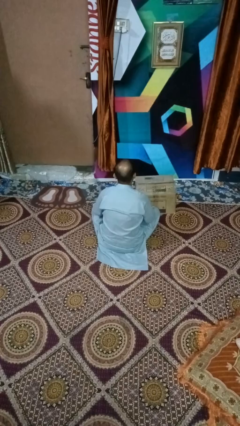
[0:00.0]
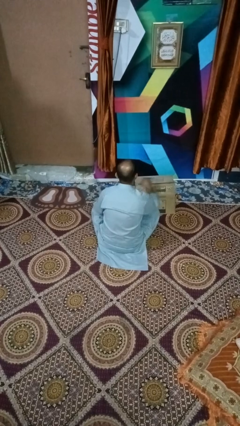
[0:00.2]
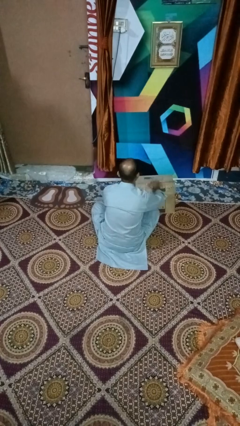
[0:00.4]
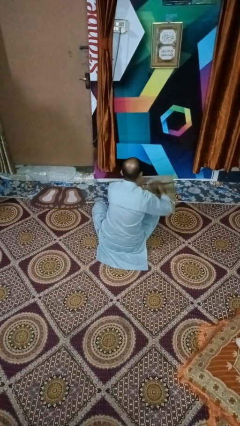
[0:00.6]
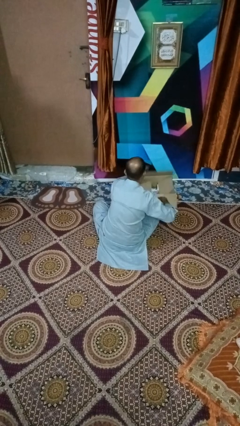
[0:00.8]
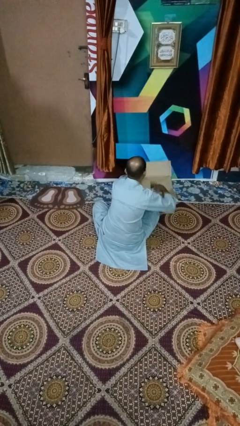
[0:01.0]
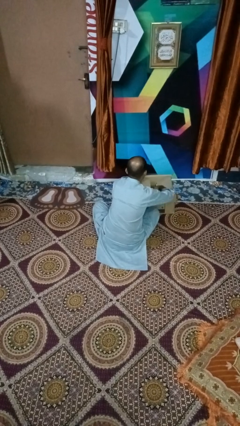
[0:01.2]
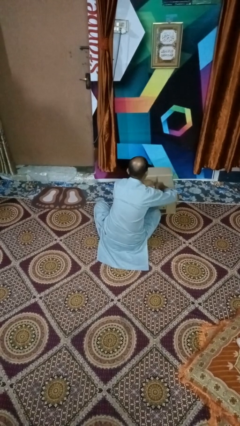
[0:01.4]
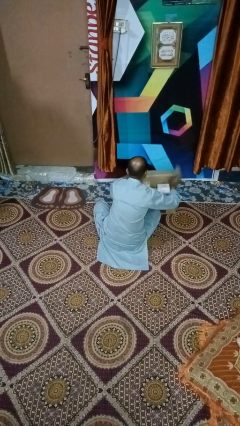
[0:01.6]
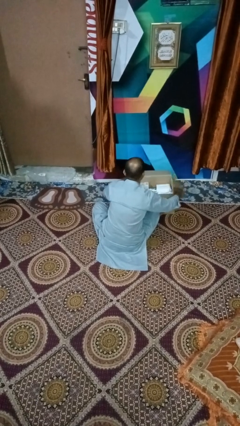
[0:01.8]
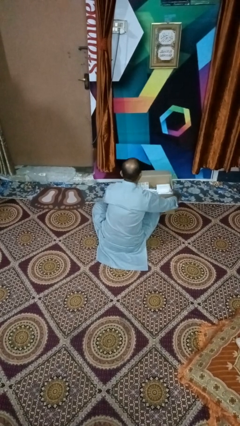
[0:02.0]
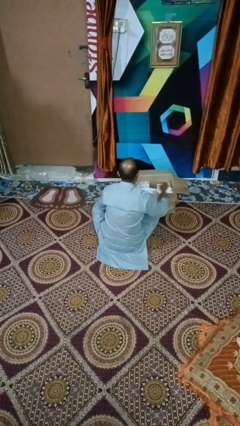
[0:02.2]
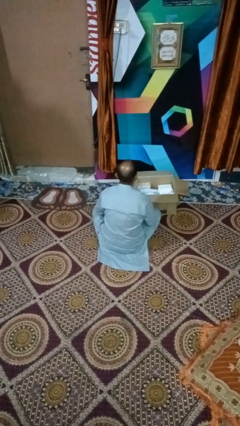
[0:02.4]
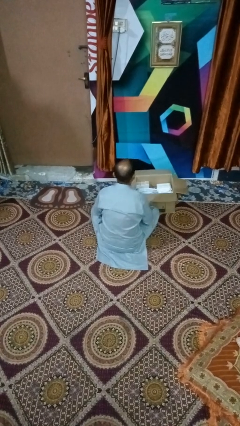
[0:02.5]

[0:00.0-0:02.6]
person opens box

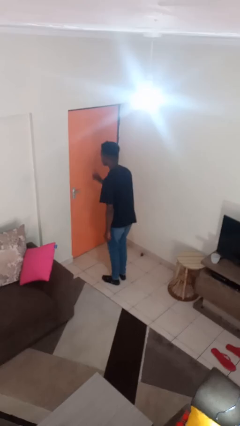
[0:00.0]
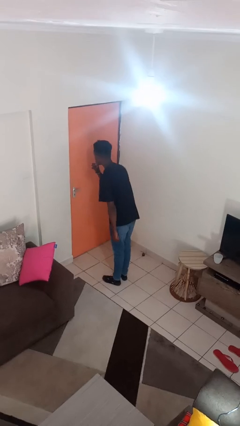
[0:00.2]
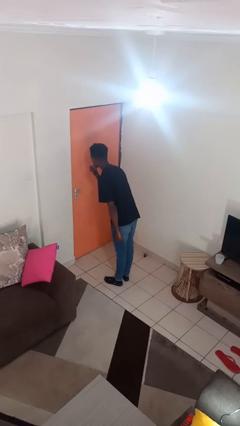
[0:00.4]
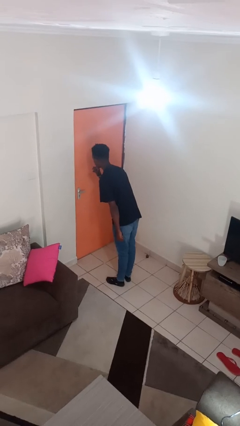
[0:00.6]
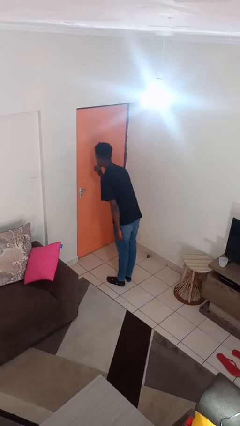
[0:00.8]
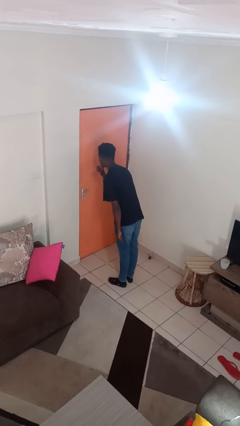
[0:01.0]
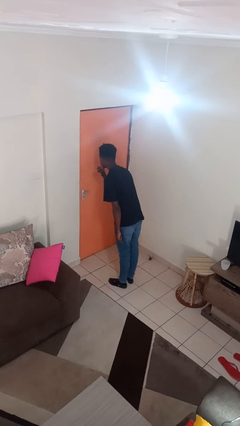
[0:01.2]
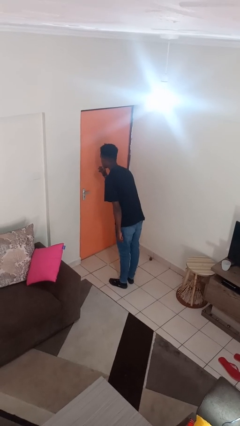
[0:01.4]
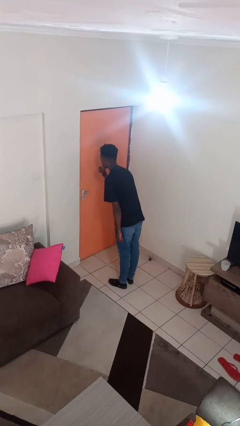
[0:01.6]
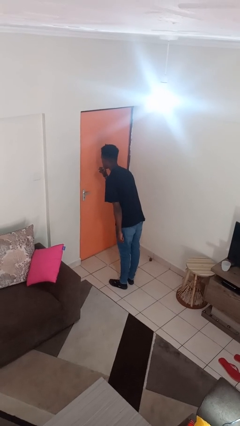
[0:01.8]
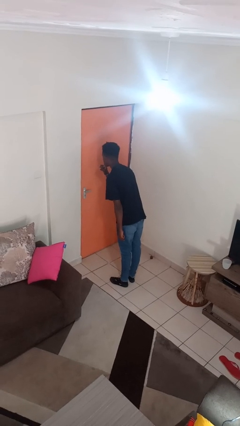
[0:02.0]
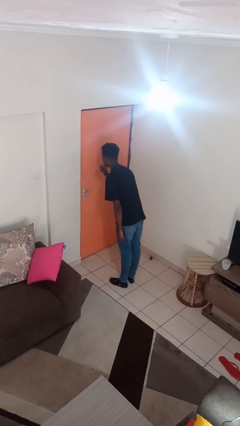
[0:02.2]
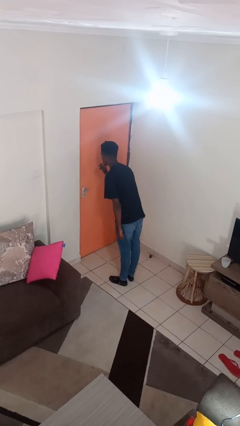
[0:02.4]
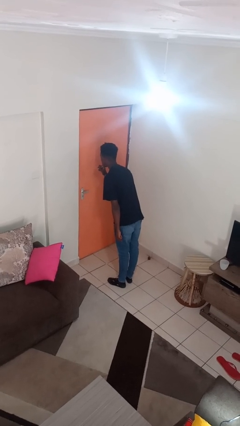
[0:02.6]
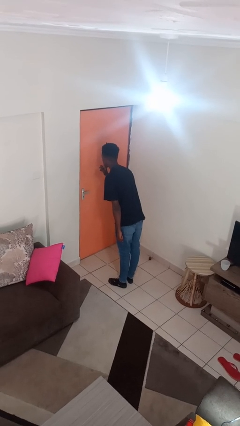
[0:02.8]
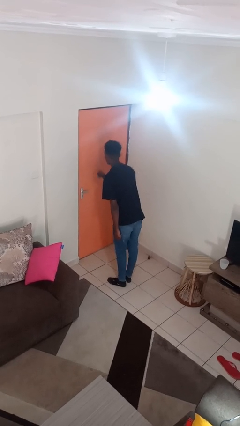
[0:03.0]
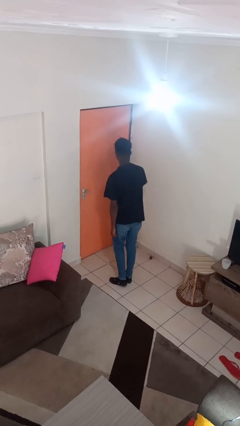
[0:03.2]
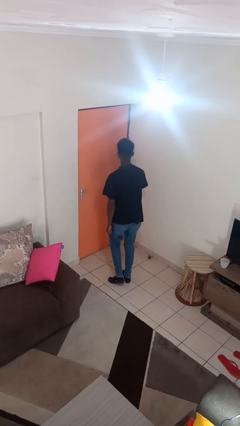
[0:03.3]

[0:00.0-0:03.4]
person gestures be quiet

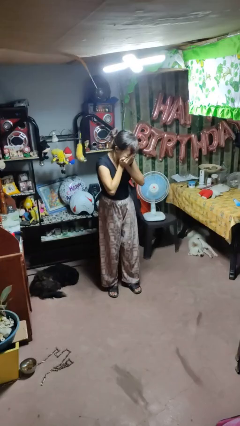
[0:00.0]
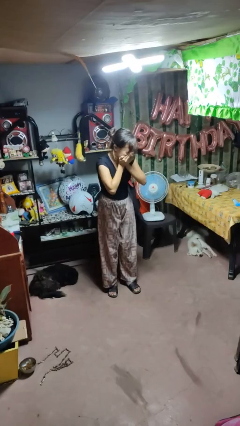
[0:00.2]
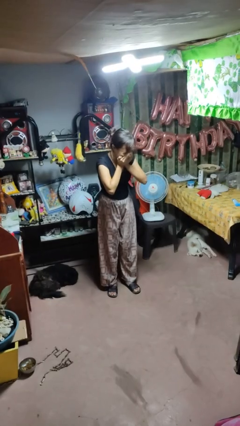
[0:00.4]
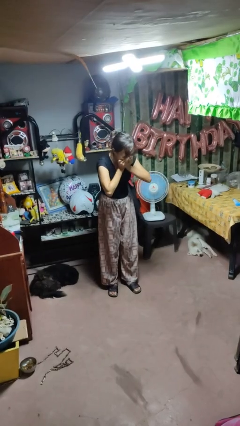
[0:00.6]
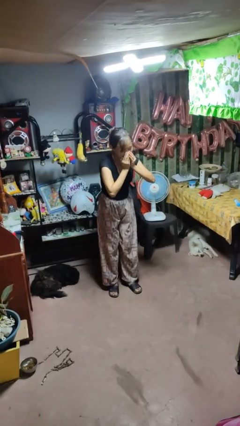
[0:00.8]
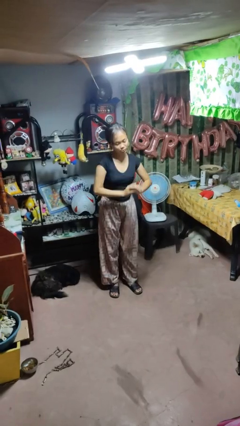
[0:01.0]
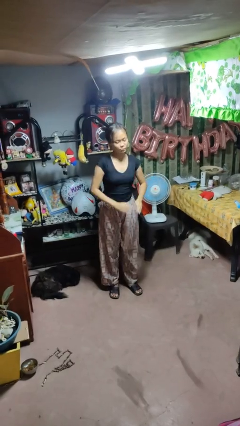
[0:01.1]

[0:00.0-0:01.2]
person sneezes into hand

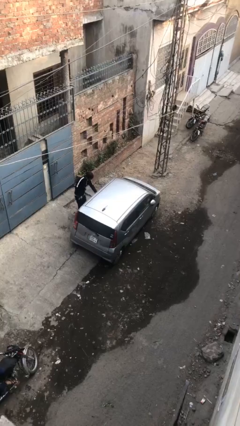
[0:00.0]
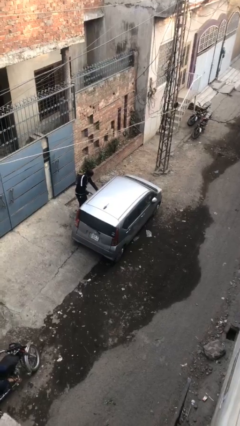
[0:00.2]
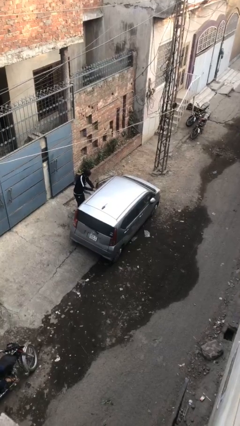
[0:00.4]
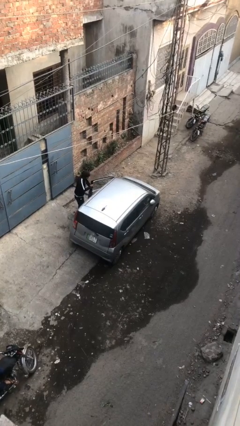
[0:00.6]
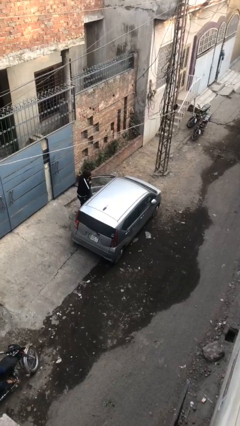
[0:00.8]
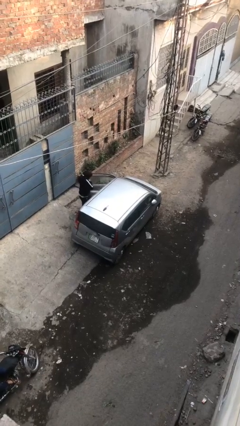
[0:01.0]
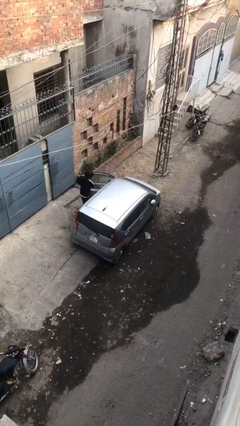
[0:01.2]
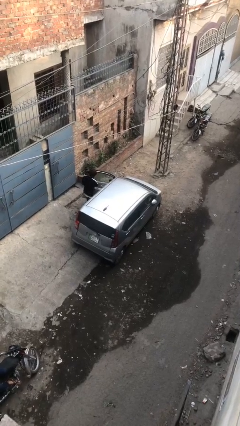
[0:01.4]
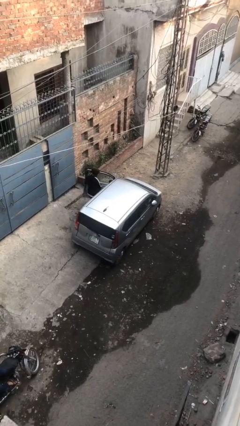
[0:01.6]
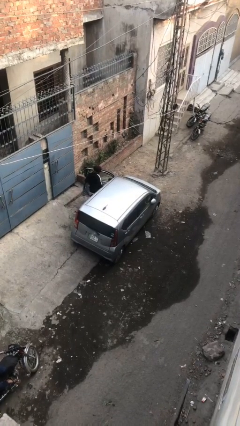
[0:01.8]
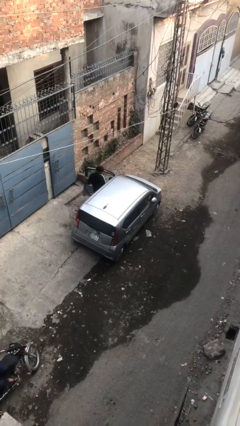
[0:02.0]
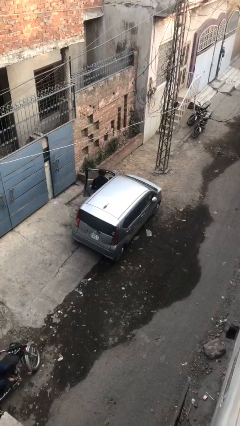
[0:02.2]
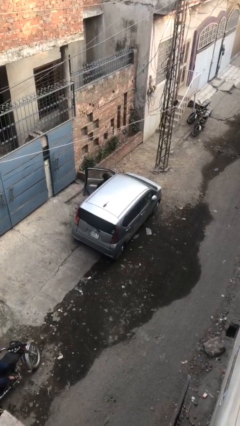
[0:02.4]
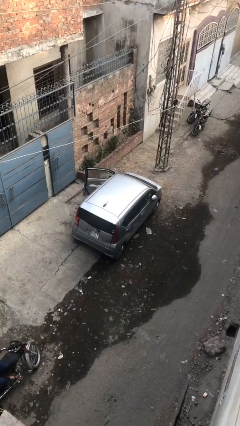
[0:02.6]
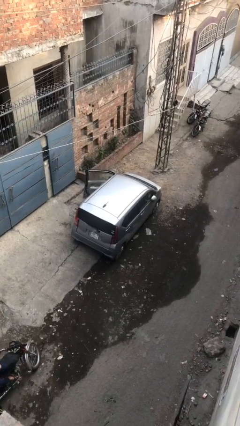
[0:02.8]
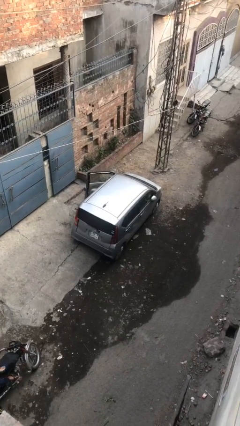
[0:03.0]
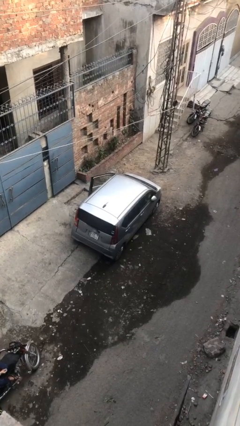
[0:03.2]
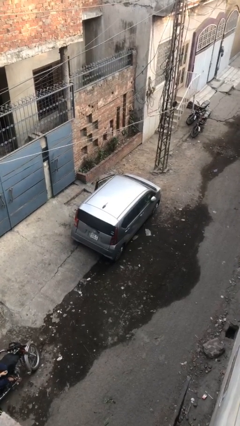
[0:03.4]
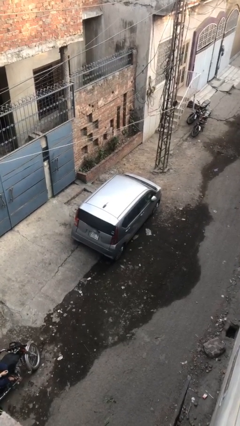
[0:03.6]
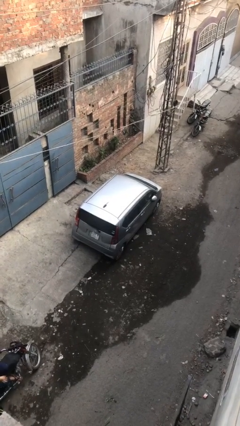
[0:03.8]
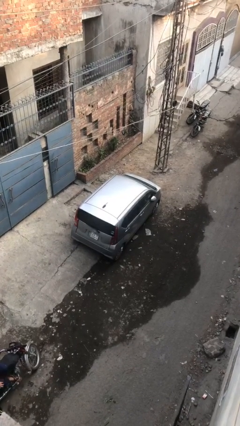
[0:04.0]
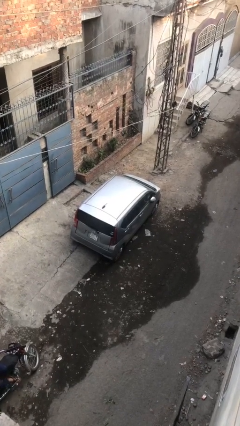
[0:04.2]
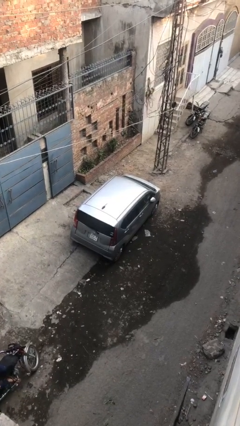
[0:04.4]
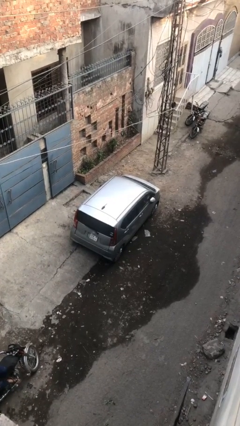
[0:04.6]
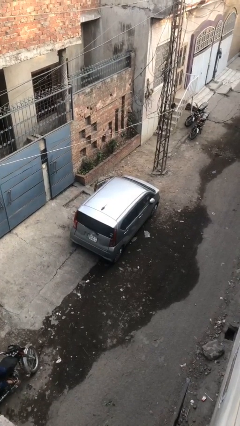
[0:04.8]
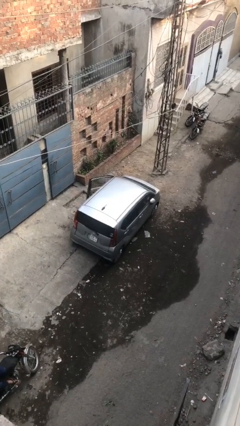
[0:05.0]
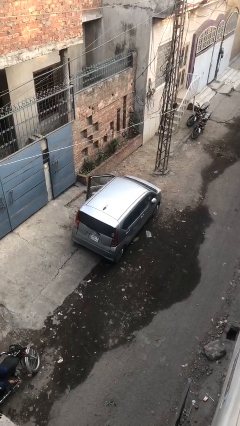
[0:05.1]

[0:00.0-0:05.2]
car picks up person

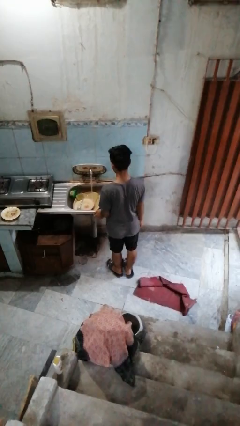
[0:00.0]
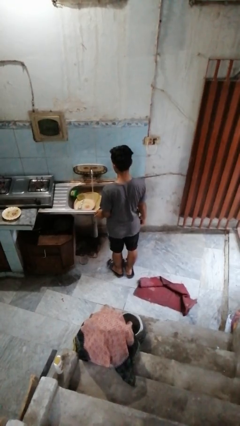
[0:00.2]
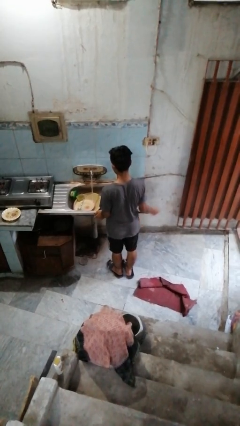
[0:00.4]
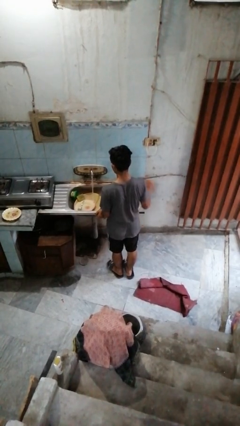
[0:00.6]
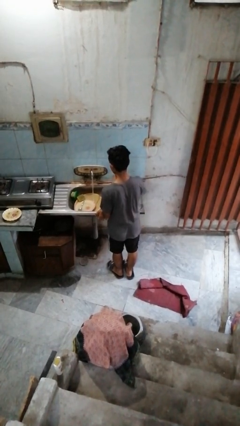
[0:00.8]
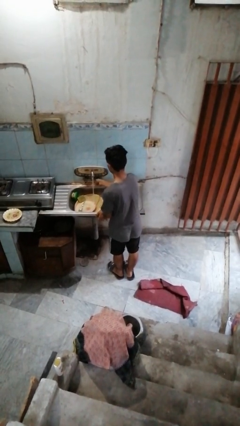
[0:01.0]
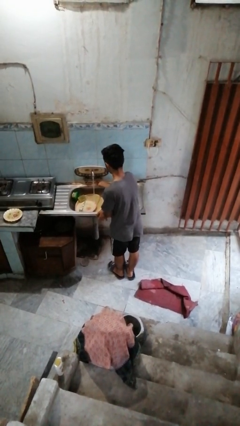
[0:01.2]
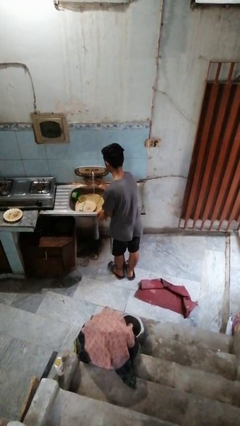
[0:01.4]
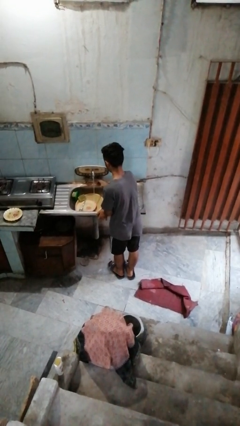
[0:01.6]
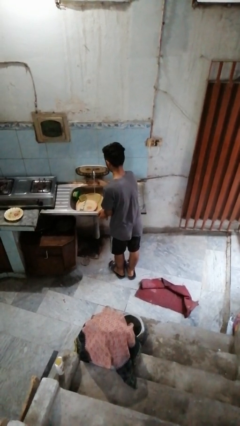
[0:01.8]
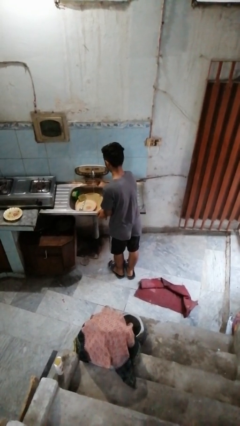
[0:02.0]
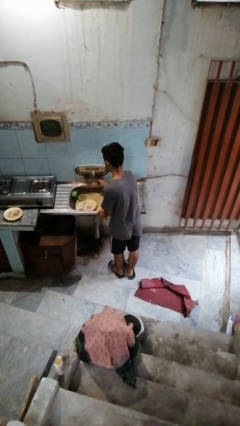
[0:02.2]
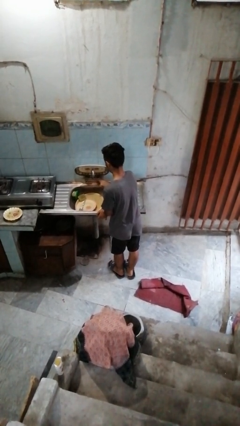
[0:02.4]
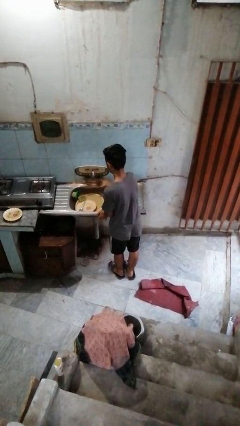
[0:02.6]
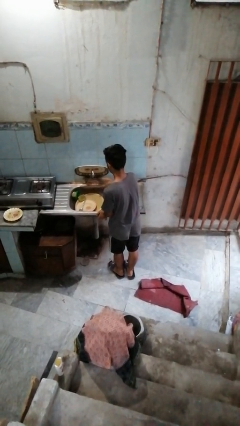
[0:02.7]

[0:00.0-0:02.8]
person turns off faucet

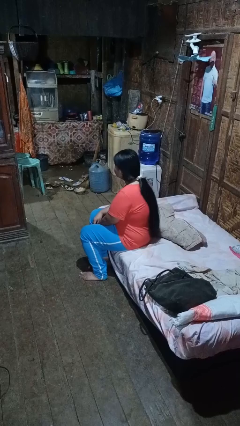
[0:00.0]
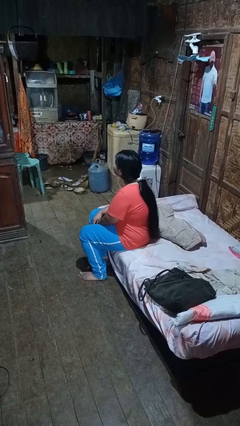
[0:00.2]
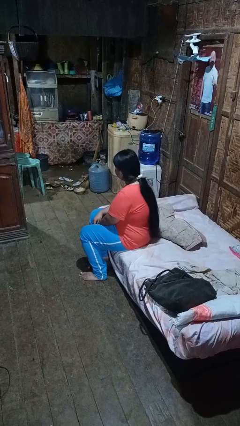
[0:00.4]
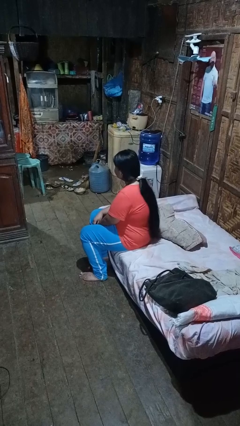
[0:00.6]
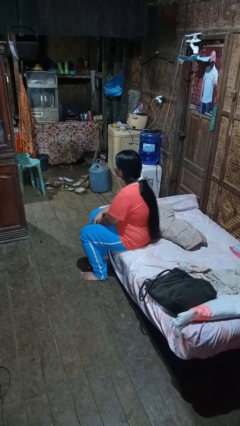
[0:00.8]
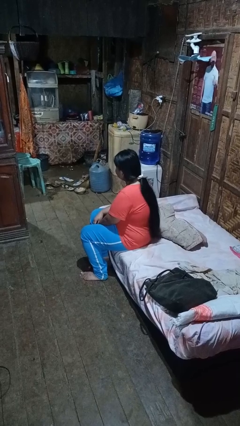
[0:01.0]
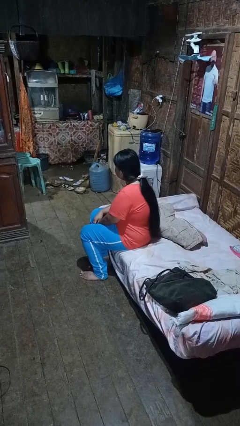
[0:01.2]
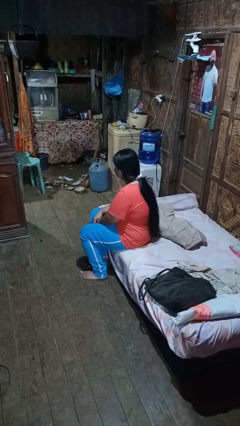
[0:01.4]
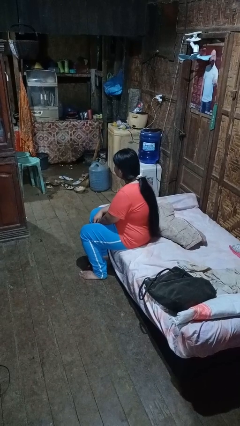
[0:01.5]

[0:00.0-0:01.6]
person nods head

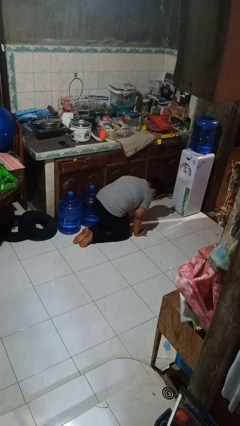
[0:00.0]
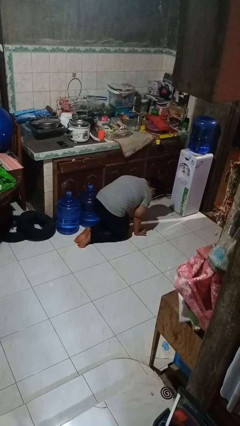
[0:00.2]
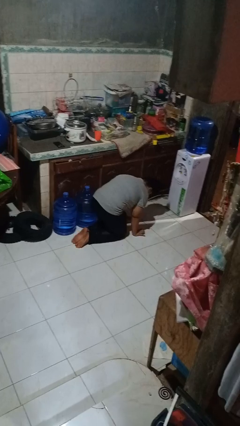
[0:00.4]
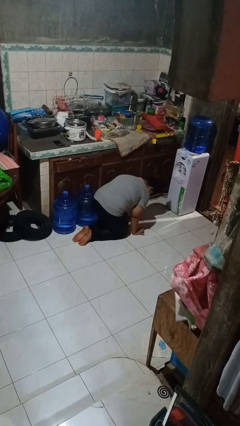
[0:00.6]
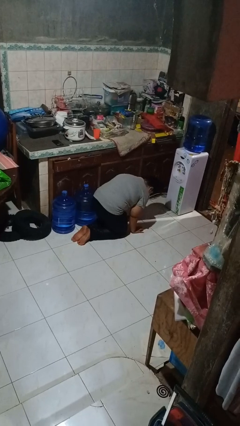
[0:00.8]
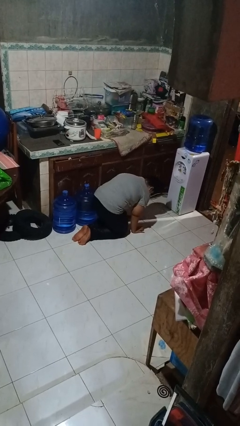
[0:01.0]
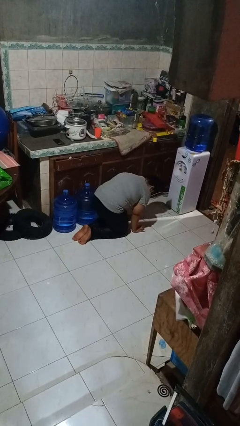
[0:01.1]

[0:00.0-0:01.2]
person crawls
